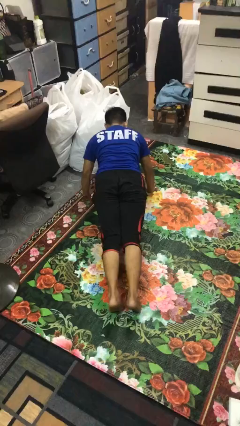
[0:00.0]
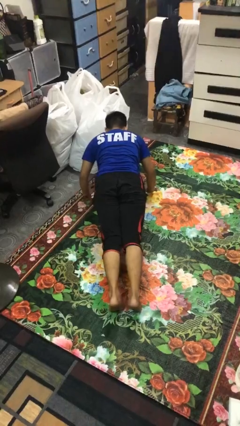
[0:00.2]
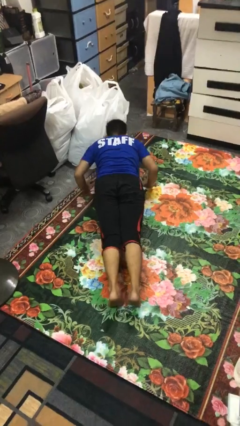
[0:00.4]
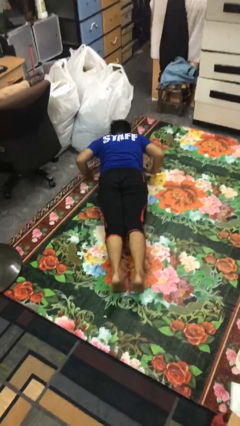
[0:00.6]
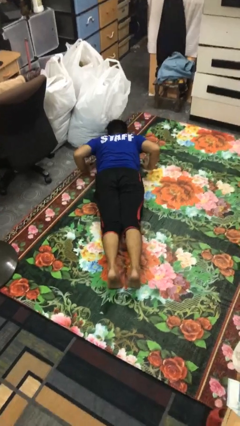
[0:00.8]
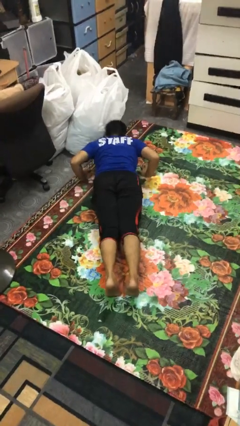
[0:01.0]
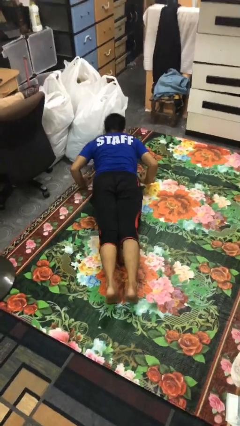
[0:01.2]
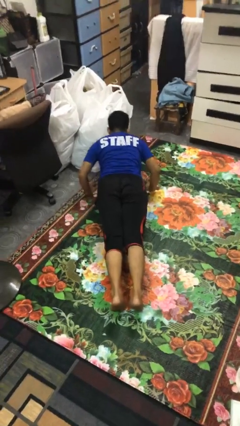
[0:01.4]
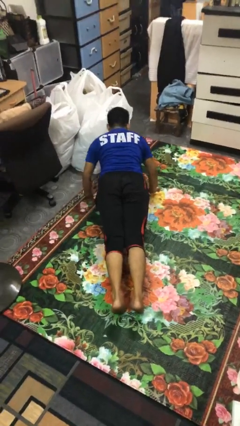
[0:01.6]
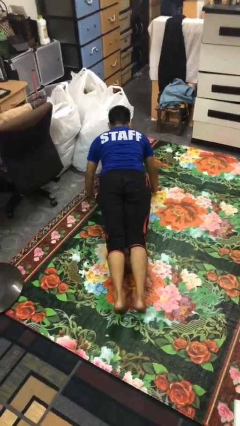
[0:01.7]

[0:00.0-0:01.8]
person exercises with pushup

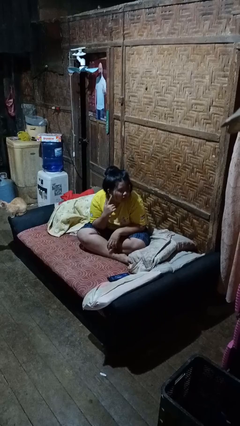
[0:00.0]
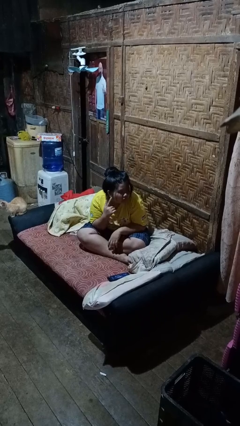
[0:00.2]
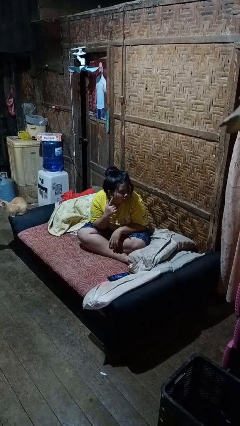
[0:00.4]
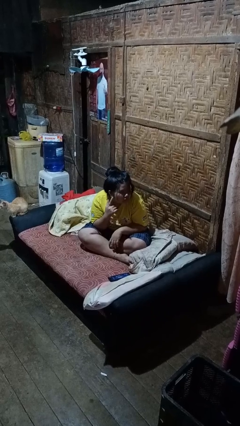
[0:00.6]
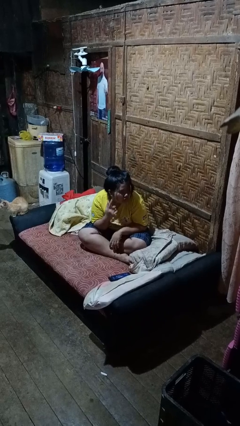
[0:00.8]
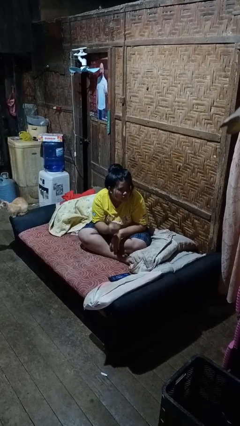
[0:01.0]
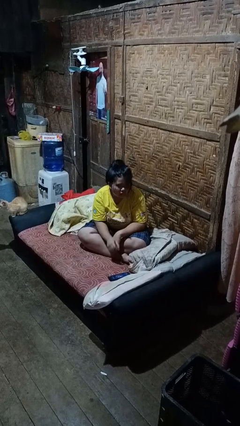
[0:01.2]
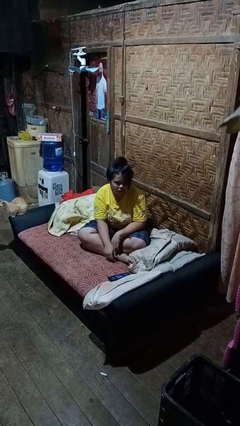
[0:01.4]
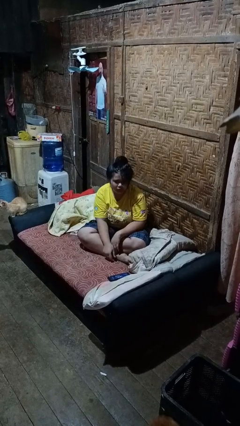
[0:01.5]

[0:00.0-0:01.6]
person gestures listen closely

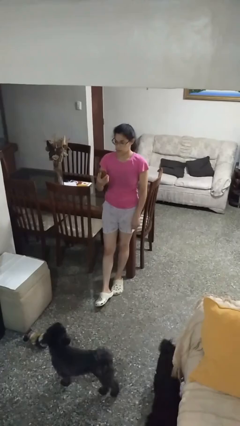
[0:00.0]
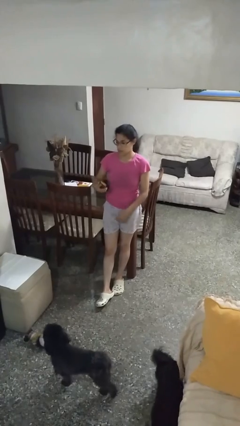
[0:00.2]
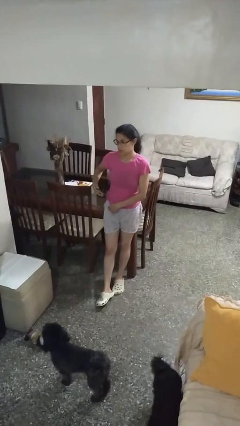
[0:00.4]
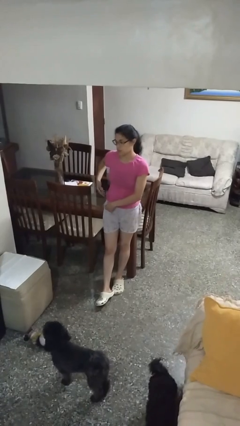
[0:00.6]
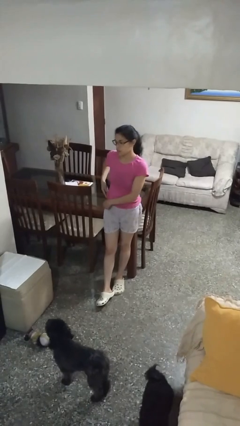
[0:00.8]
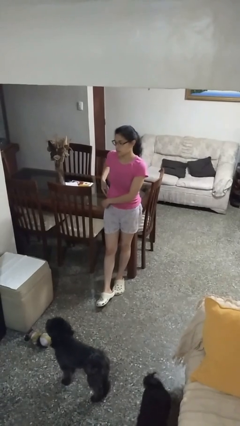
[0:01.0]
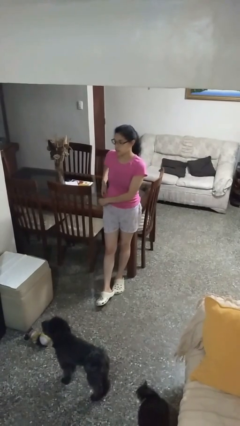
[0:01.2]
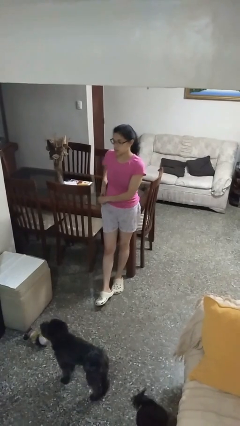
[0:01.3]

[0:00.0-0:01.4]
person puts phone into pocket

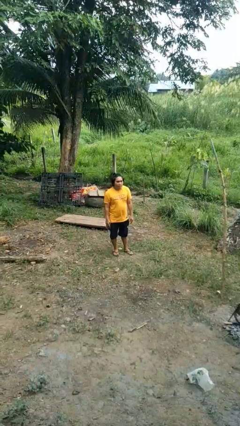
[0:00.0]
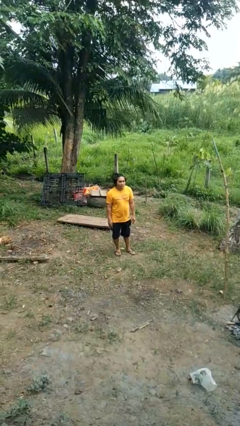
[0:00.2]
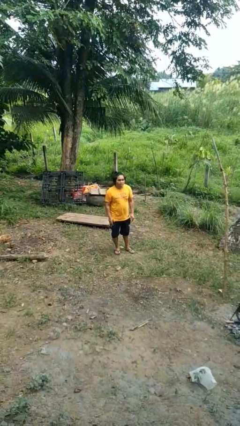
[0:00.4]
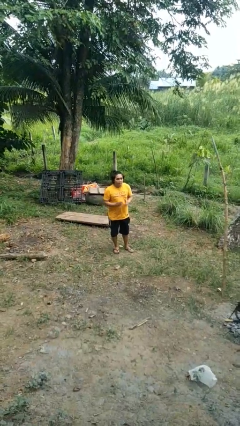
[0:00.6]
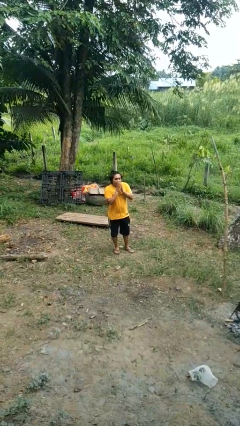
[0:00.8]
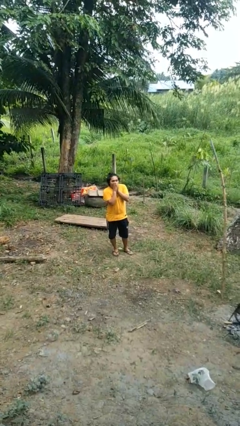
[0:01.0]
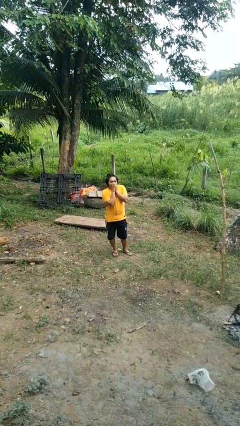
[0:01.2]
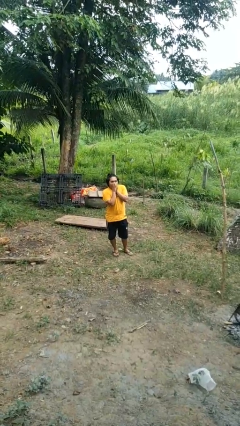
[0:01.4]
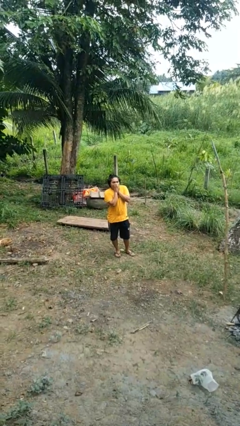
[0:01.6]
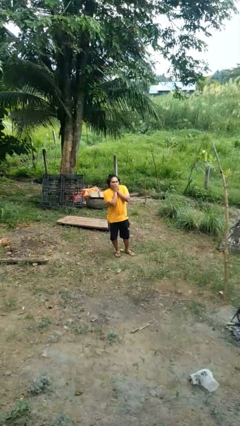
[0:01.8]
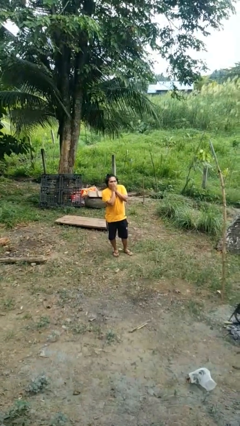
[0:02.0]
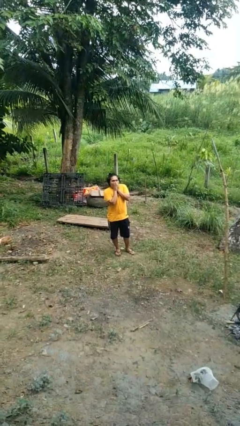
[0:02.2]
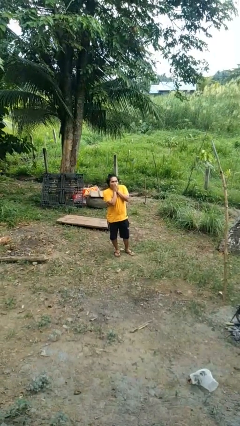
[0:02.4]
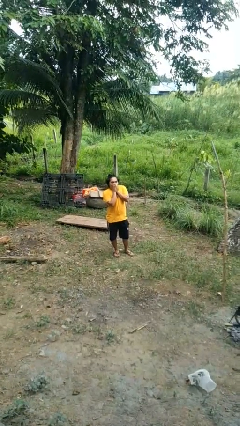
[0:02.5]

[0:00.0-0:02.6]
person covers face with hands

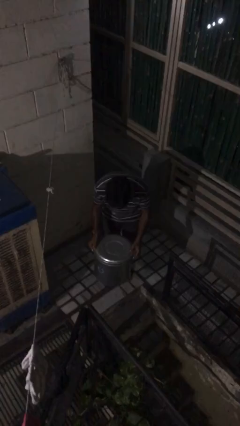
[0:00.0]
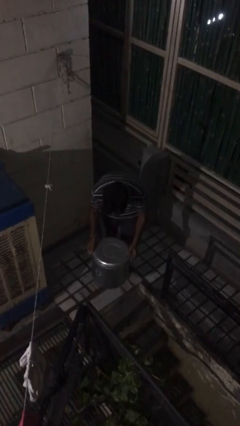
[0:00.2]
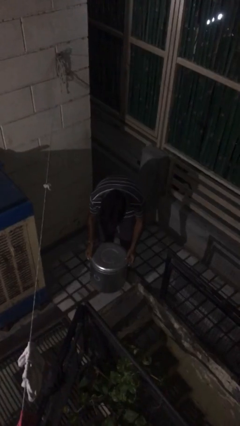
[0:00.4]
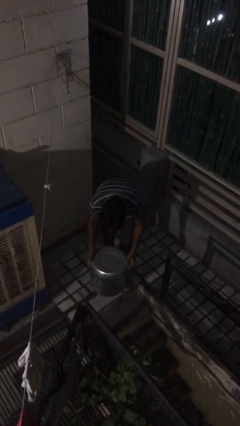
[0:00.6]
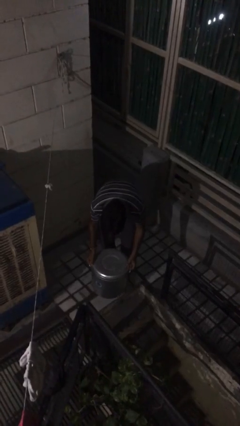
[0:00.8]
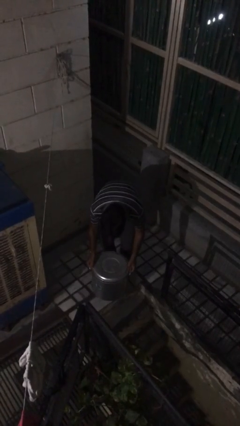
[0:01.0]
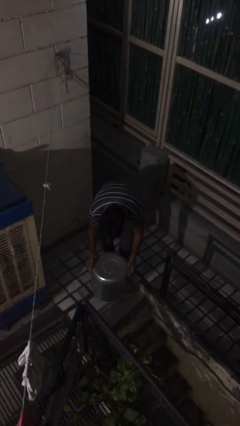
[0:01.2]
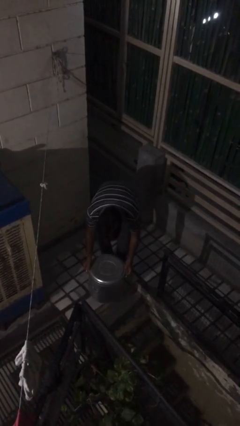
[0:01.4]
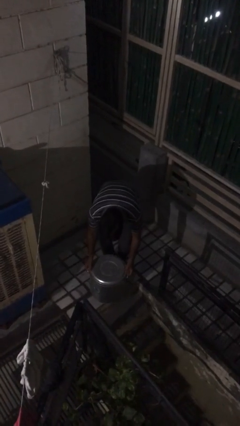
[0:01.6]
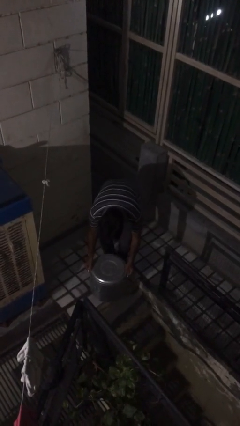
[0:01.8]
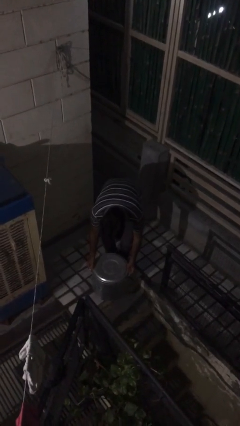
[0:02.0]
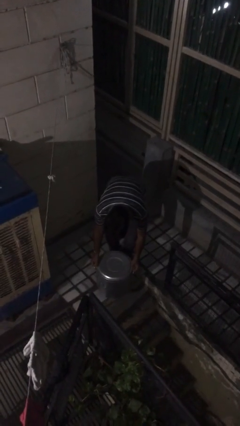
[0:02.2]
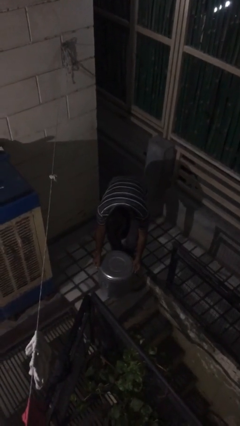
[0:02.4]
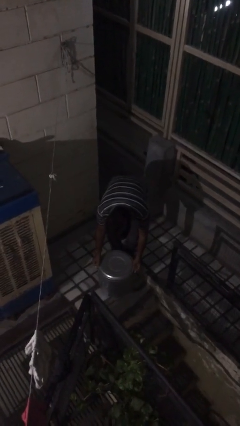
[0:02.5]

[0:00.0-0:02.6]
person puts down object on floor

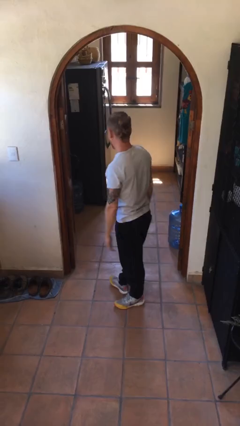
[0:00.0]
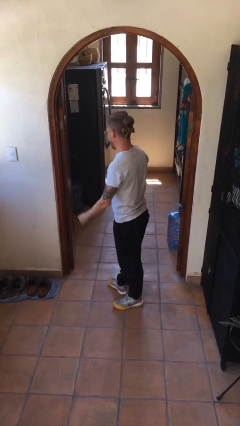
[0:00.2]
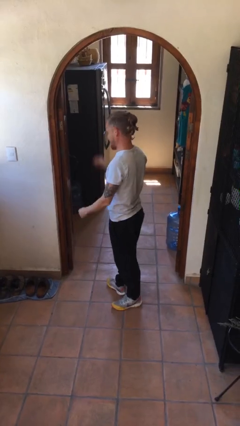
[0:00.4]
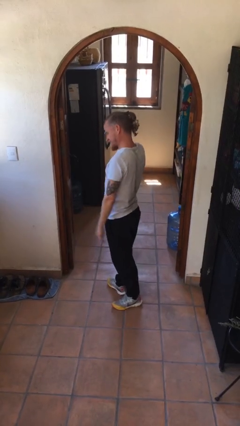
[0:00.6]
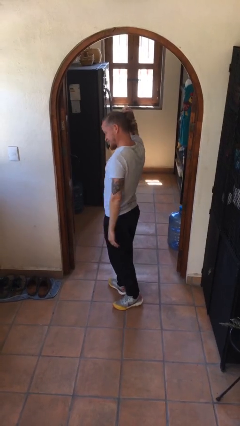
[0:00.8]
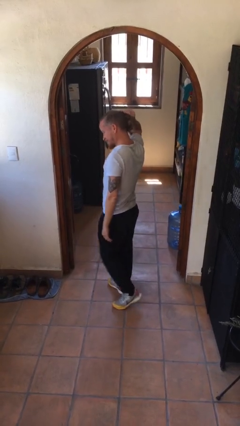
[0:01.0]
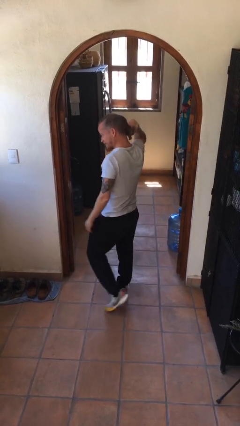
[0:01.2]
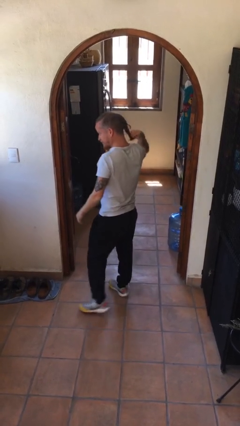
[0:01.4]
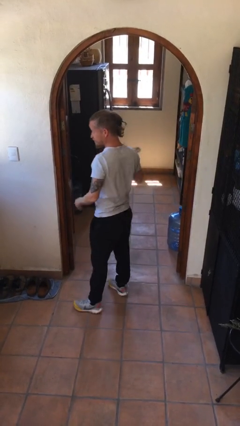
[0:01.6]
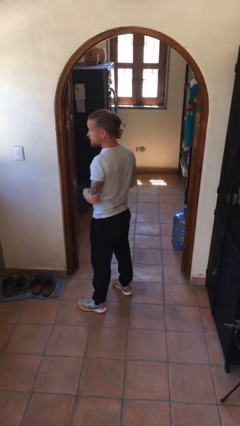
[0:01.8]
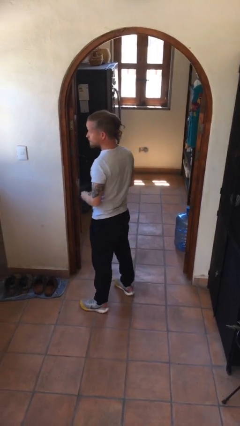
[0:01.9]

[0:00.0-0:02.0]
person takes off hairtie

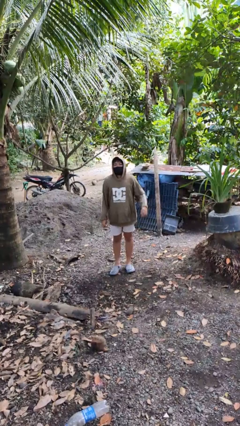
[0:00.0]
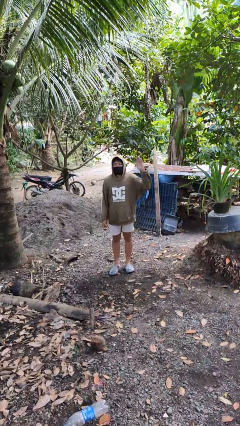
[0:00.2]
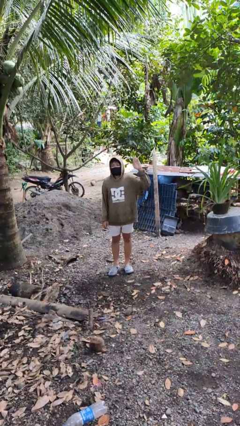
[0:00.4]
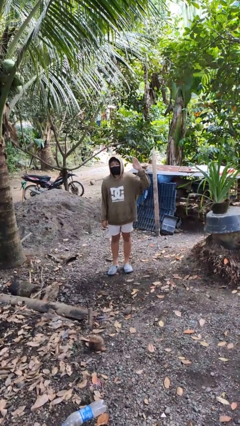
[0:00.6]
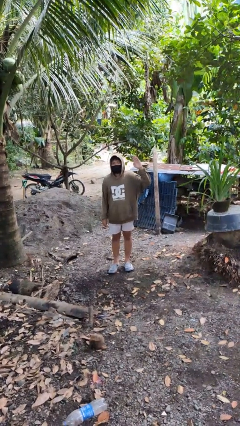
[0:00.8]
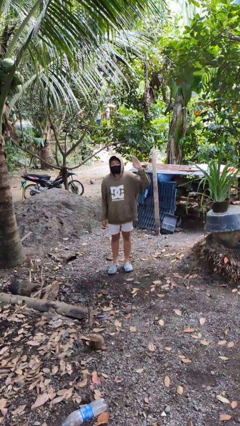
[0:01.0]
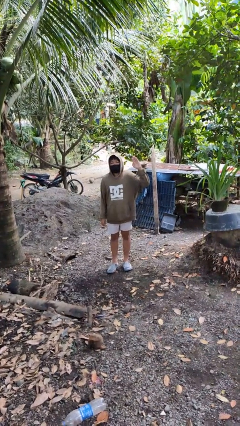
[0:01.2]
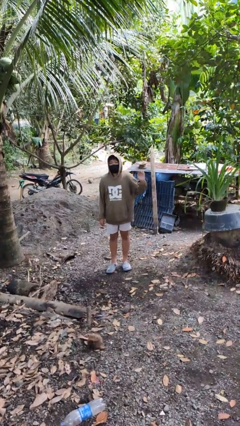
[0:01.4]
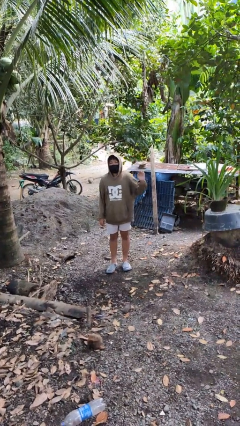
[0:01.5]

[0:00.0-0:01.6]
person gestures number five

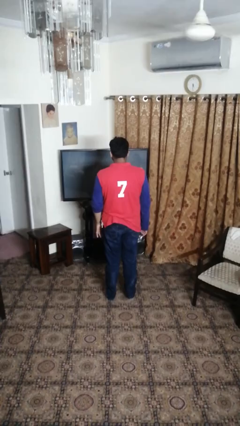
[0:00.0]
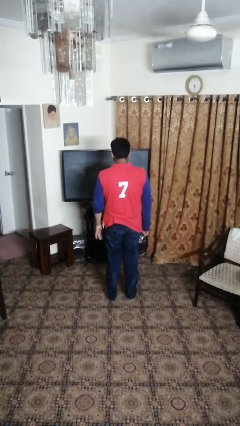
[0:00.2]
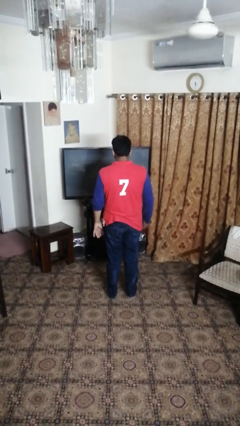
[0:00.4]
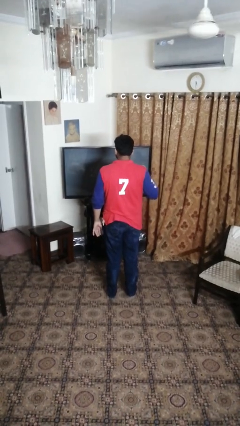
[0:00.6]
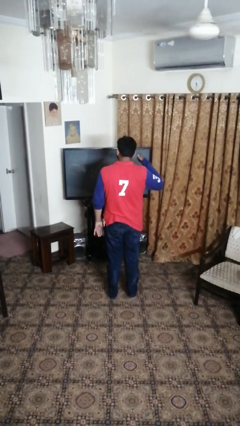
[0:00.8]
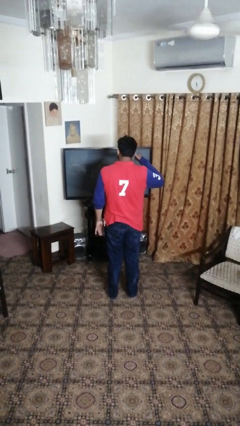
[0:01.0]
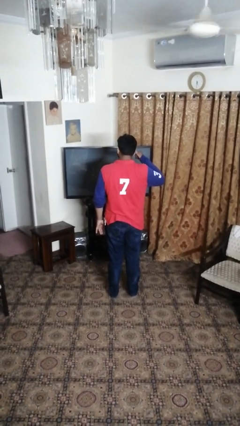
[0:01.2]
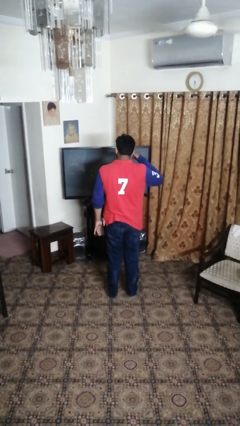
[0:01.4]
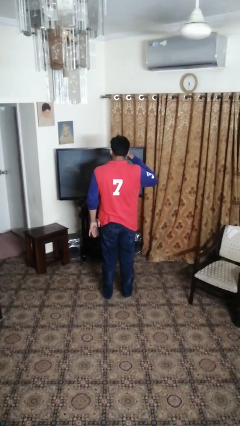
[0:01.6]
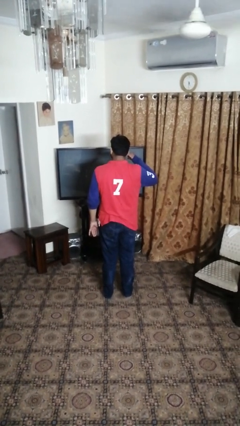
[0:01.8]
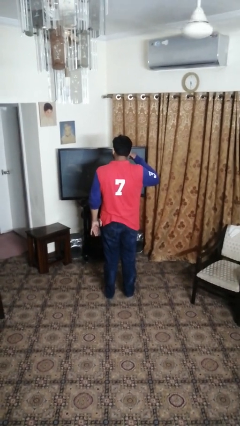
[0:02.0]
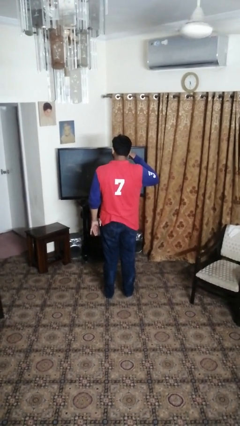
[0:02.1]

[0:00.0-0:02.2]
person gestures call me

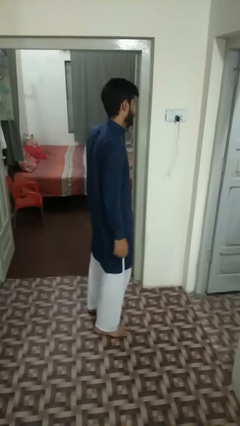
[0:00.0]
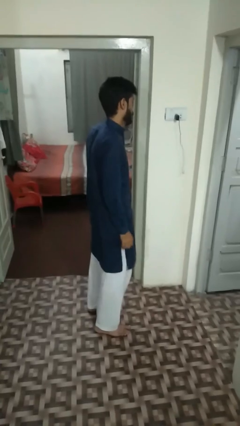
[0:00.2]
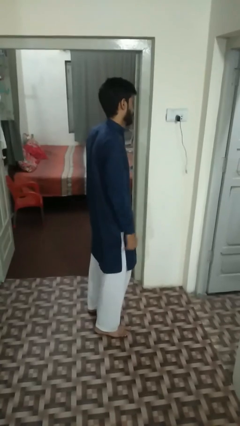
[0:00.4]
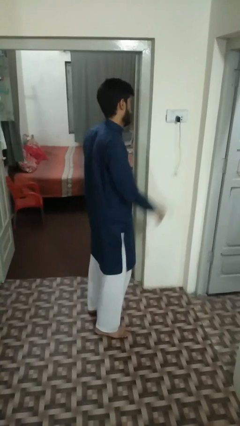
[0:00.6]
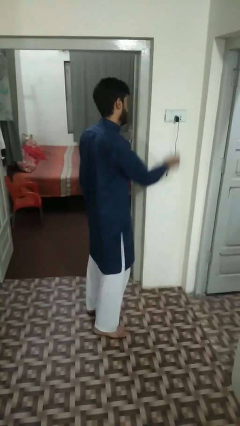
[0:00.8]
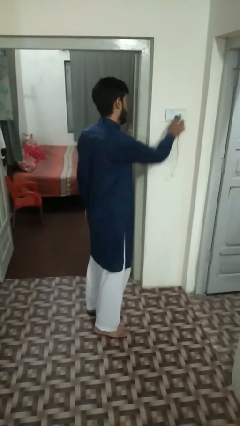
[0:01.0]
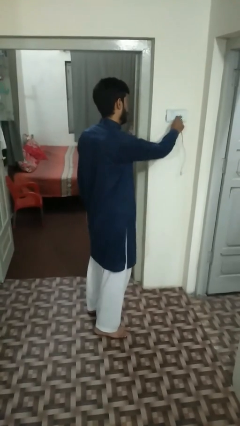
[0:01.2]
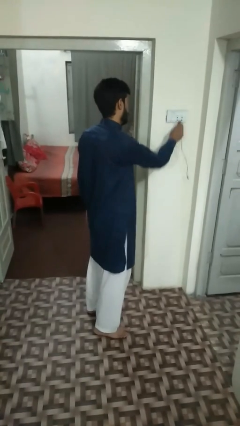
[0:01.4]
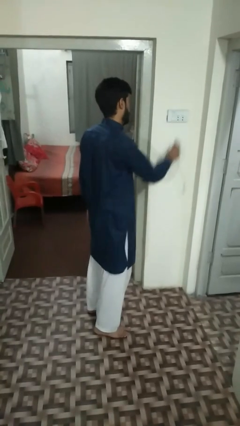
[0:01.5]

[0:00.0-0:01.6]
person unplugs from electrical socket
